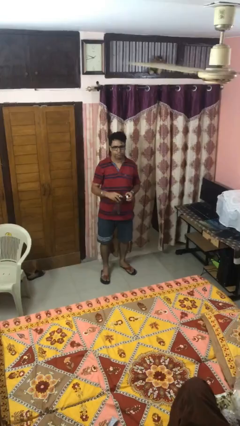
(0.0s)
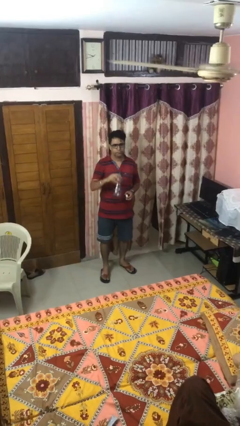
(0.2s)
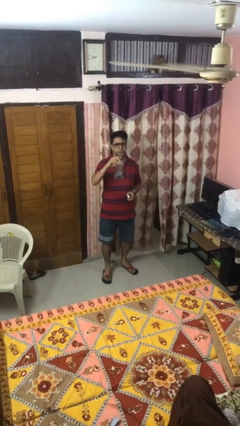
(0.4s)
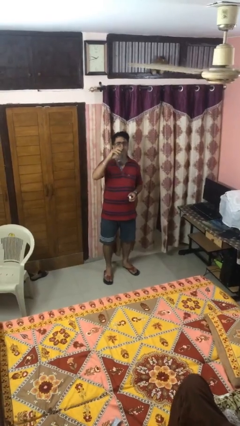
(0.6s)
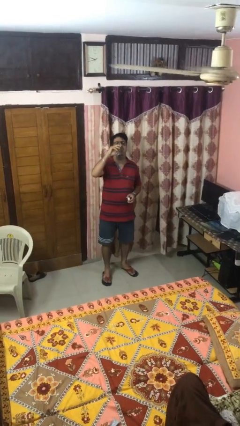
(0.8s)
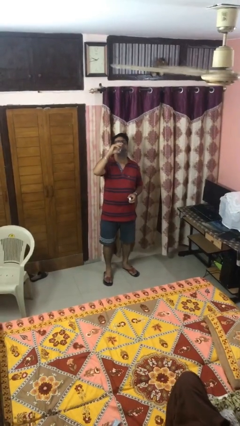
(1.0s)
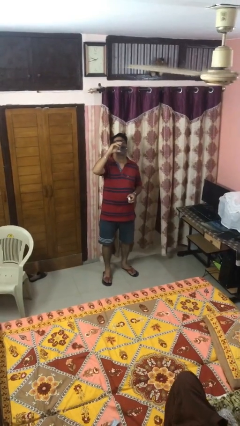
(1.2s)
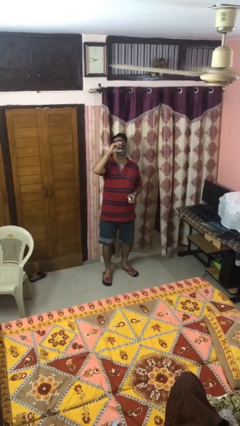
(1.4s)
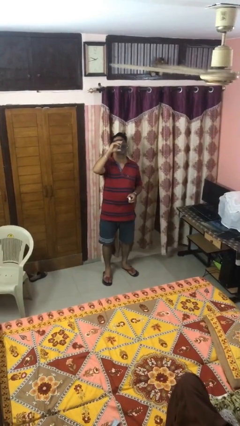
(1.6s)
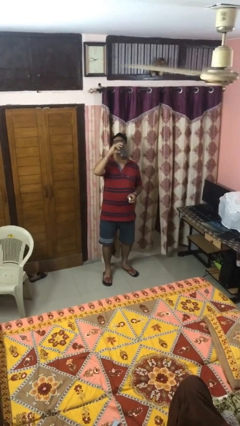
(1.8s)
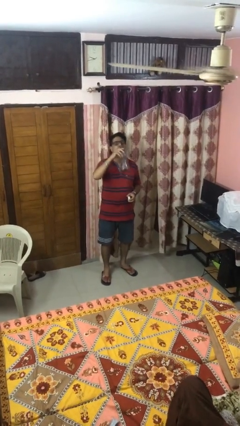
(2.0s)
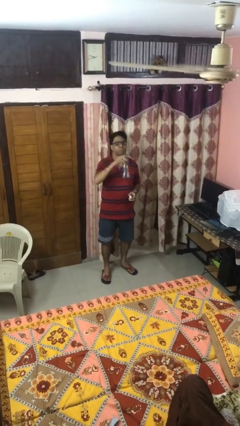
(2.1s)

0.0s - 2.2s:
person drinks from bottle

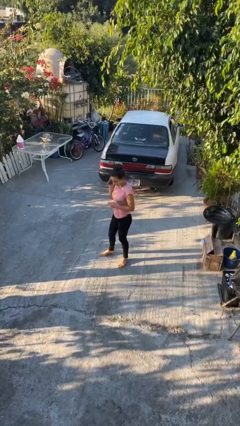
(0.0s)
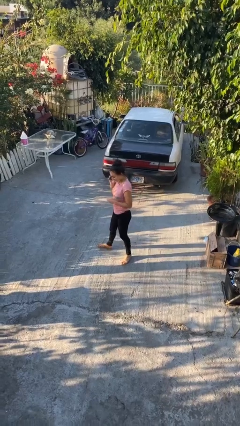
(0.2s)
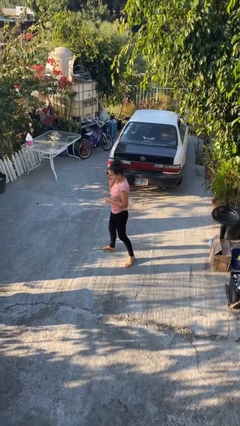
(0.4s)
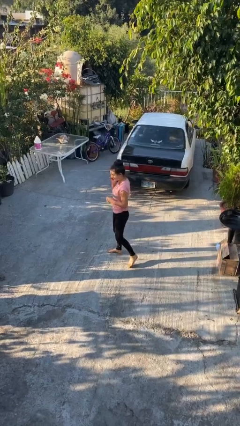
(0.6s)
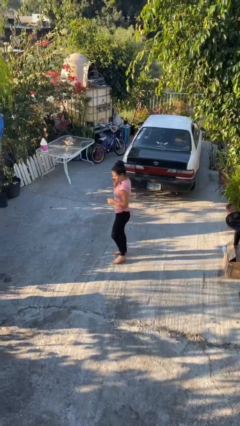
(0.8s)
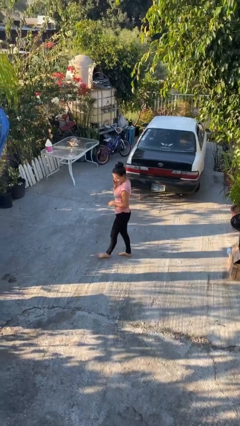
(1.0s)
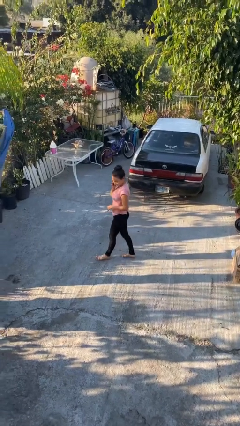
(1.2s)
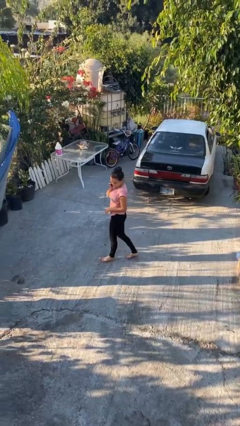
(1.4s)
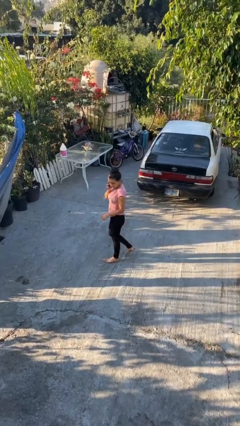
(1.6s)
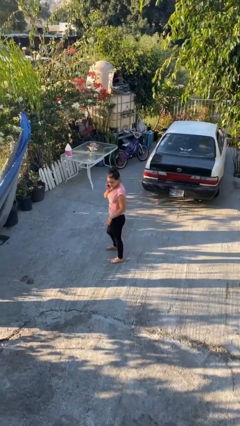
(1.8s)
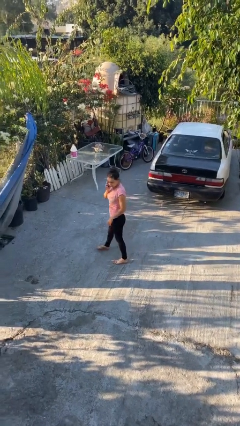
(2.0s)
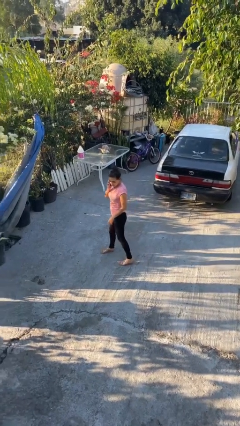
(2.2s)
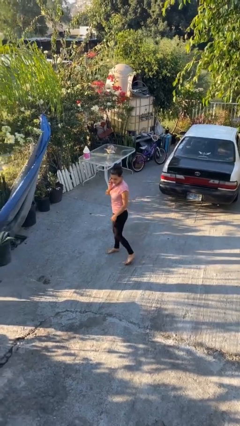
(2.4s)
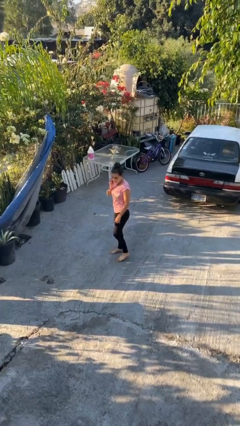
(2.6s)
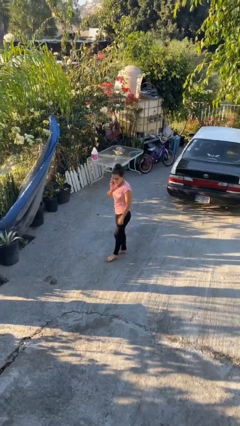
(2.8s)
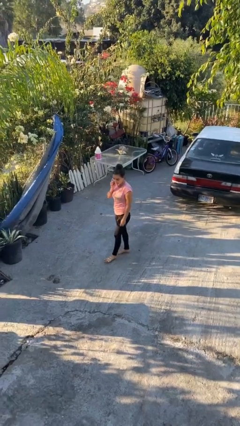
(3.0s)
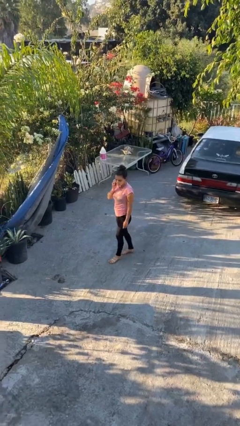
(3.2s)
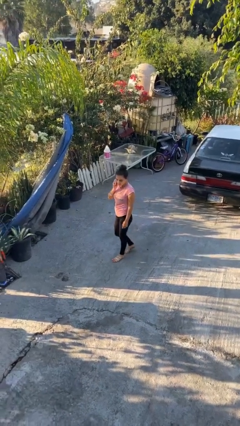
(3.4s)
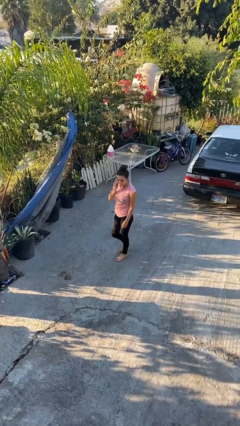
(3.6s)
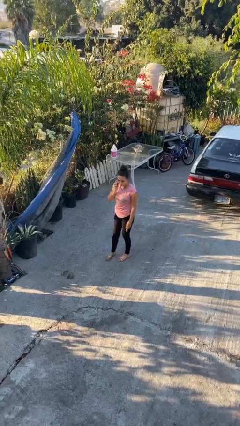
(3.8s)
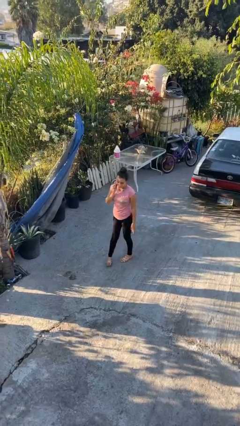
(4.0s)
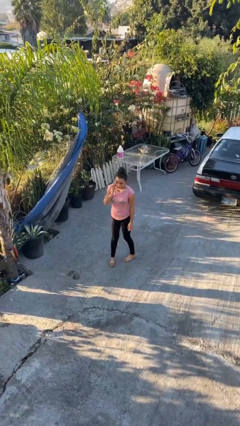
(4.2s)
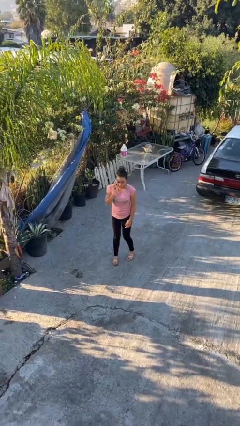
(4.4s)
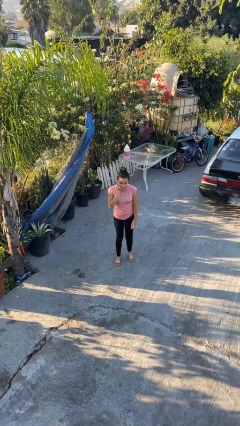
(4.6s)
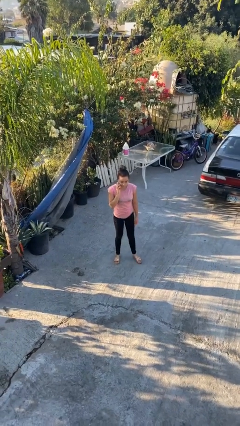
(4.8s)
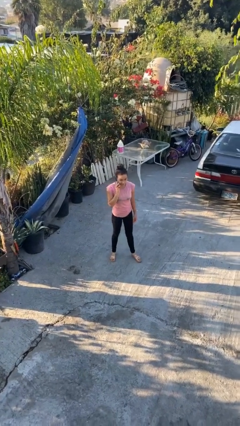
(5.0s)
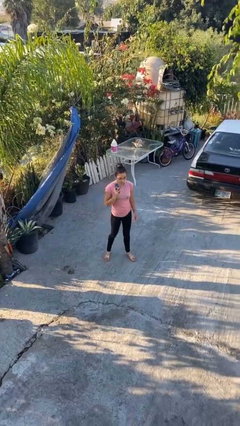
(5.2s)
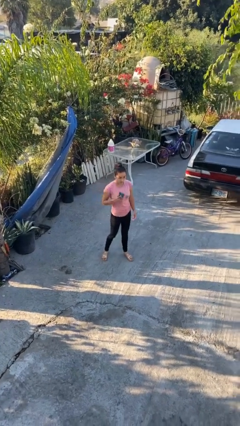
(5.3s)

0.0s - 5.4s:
person talks on phone

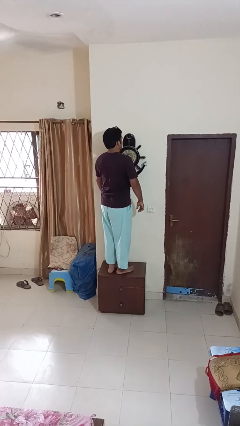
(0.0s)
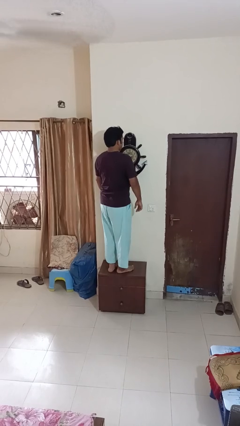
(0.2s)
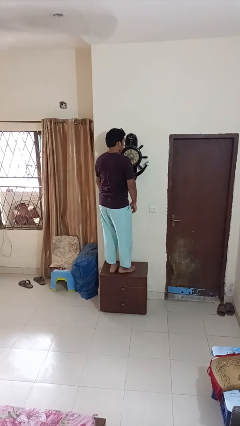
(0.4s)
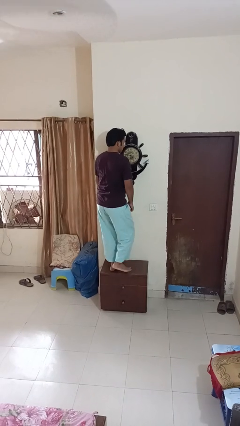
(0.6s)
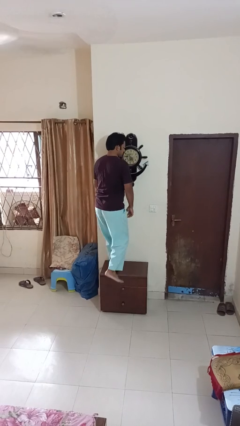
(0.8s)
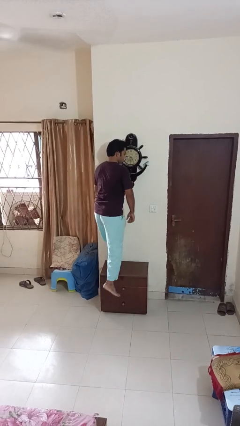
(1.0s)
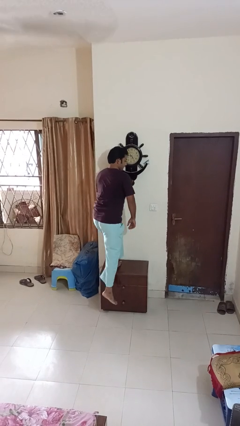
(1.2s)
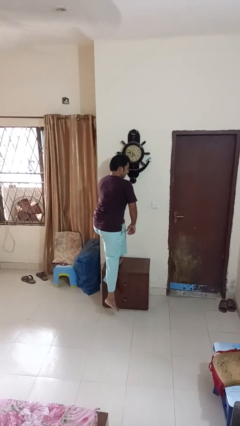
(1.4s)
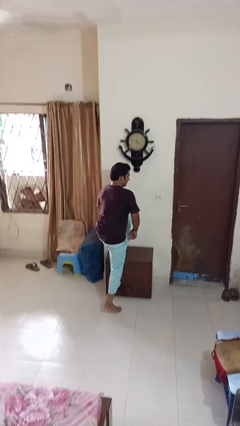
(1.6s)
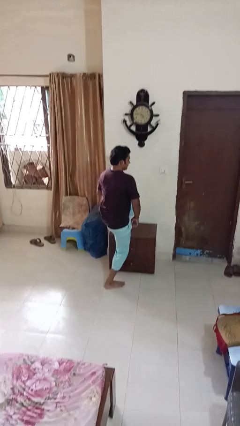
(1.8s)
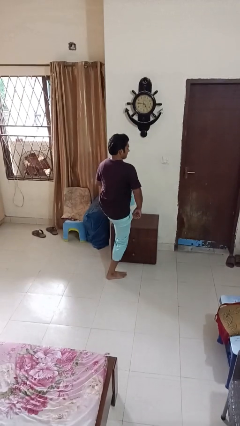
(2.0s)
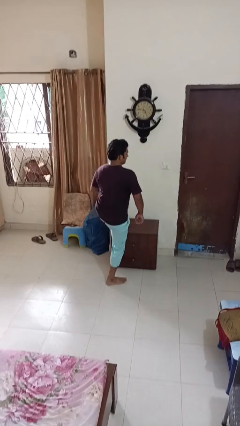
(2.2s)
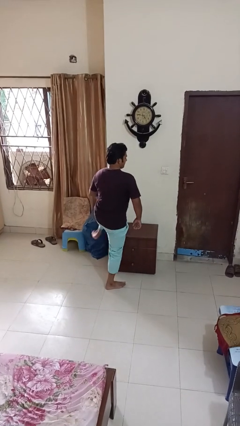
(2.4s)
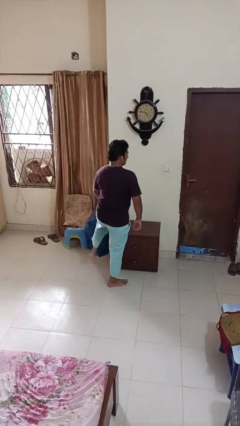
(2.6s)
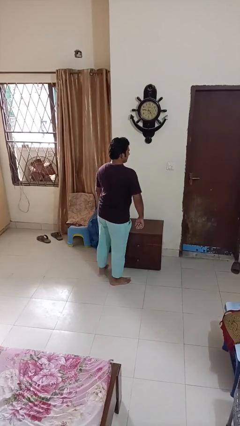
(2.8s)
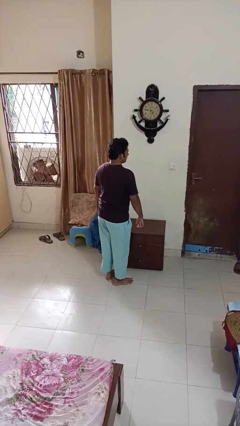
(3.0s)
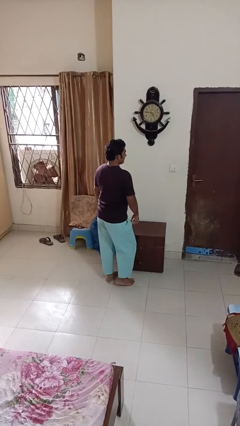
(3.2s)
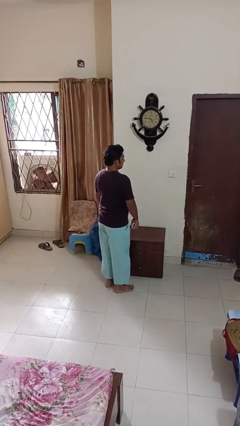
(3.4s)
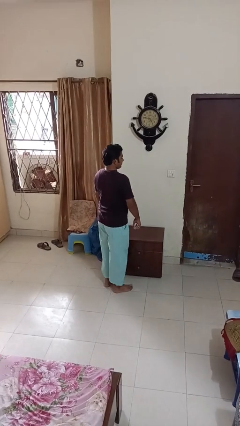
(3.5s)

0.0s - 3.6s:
person climbs off table

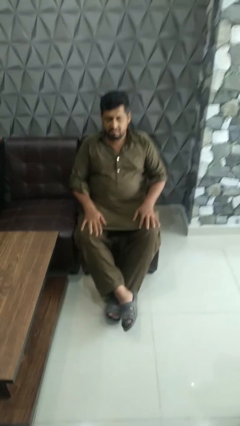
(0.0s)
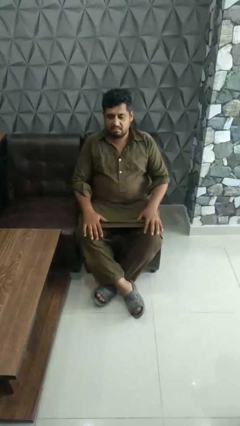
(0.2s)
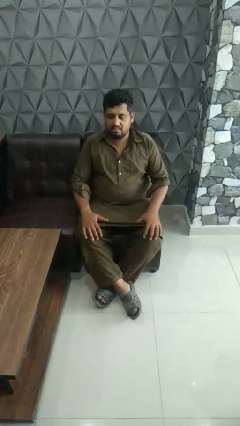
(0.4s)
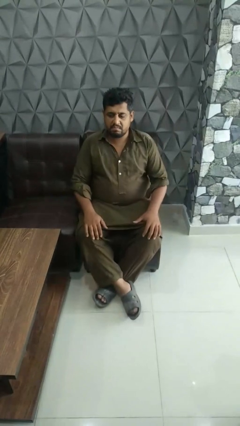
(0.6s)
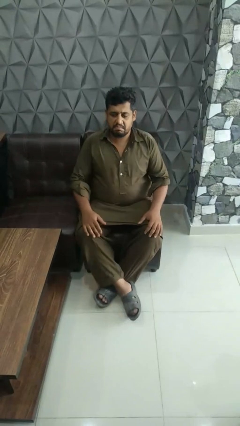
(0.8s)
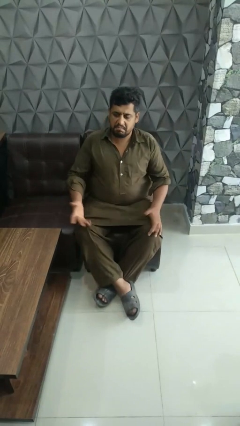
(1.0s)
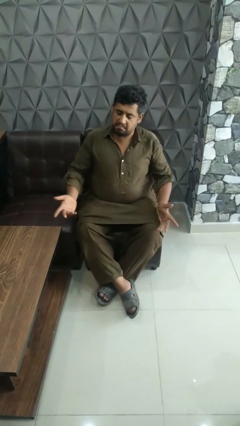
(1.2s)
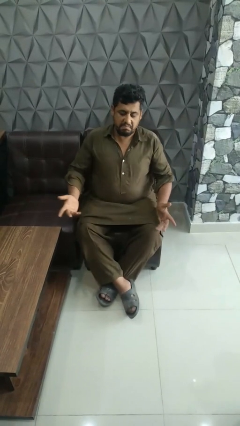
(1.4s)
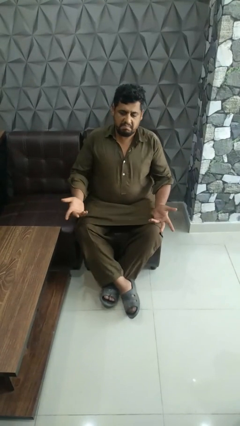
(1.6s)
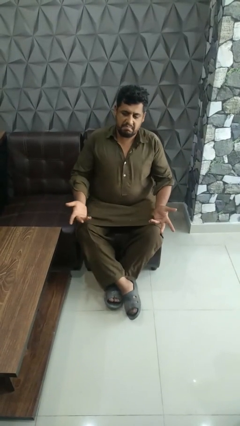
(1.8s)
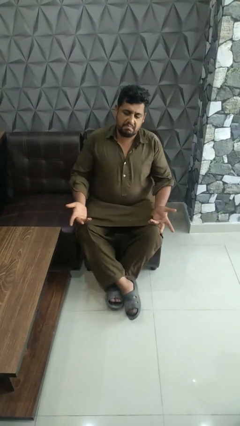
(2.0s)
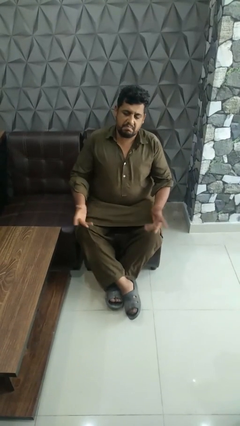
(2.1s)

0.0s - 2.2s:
person shrugs

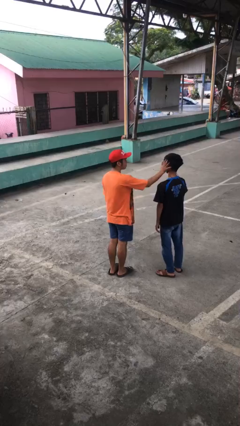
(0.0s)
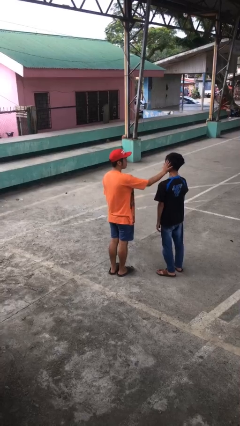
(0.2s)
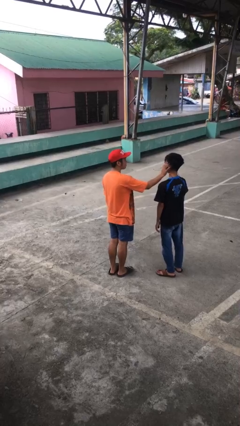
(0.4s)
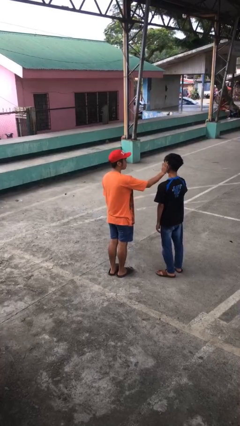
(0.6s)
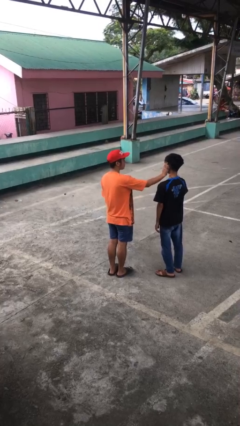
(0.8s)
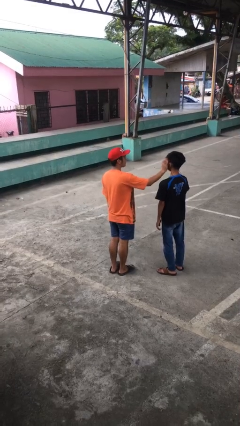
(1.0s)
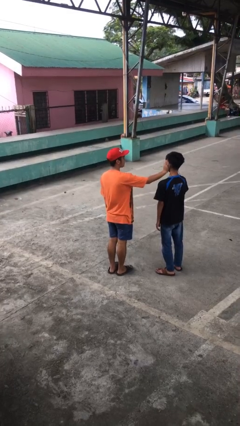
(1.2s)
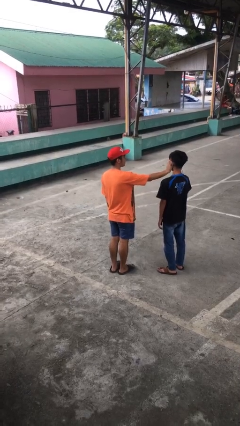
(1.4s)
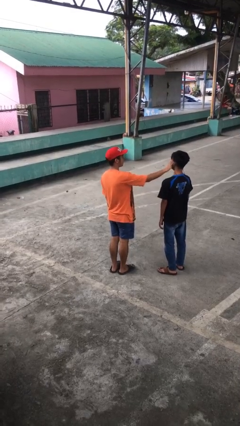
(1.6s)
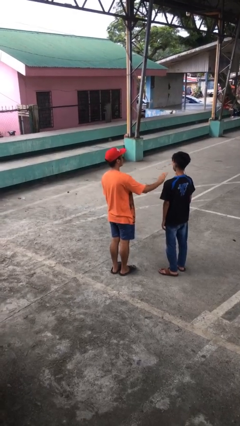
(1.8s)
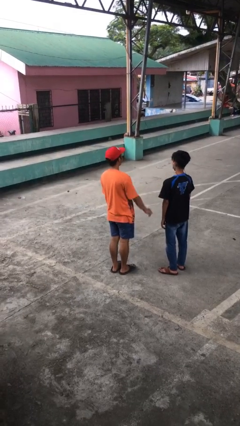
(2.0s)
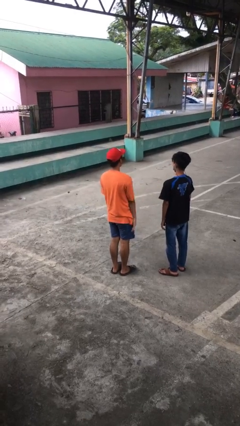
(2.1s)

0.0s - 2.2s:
person touches face of person

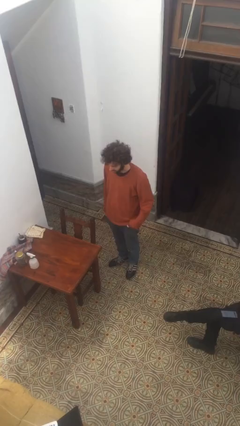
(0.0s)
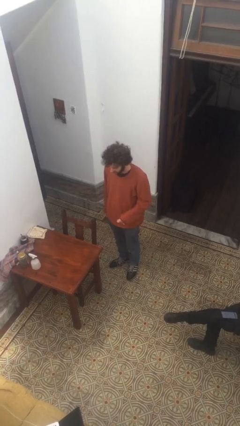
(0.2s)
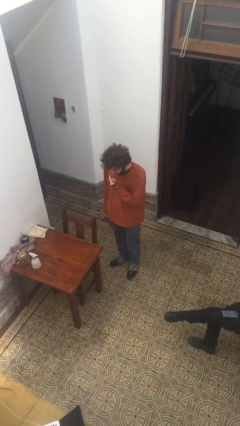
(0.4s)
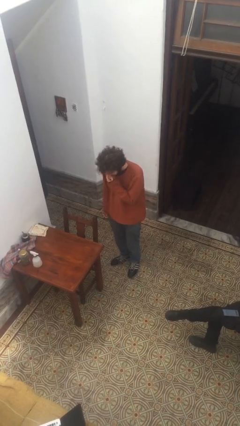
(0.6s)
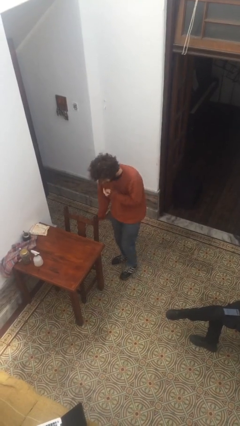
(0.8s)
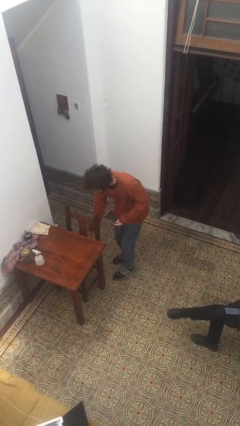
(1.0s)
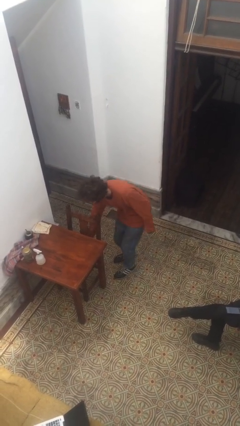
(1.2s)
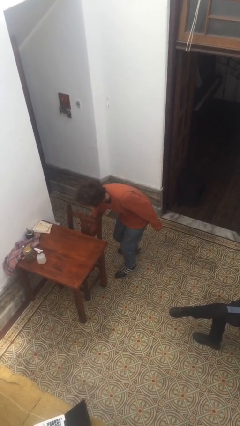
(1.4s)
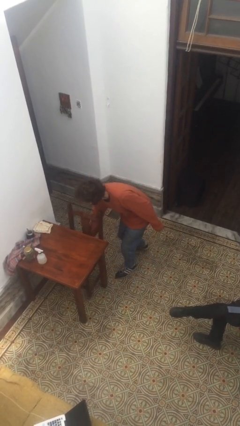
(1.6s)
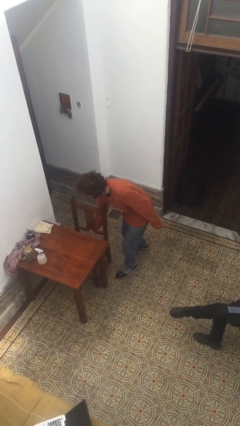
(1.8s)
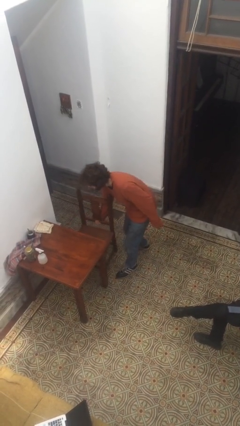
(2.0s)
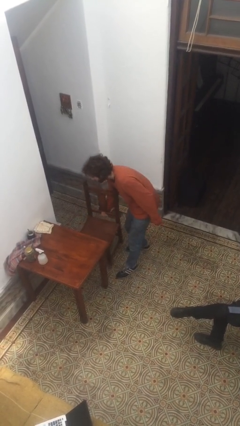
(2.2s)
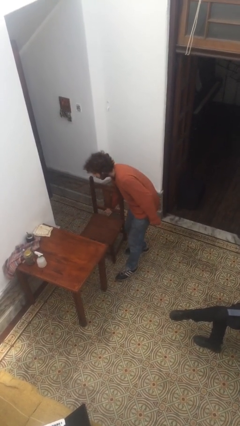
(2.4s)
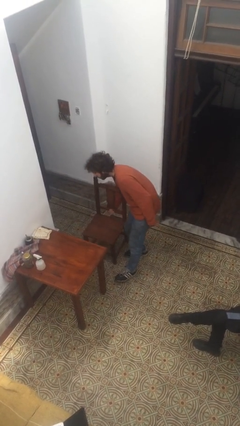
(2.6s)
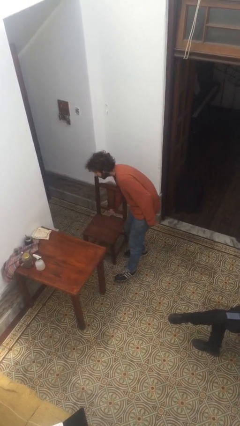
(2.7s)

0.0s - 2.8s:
person pulls out chair
